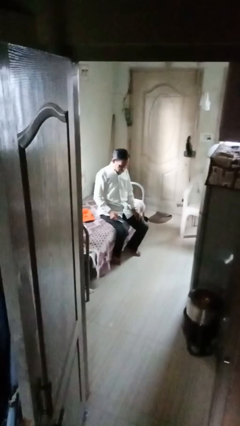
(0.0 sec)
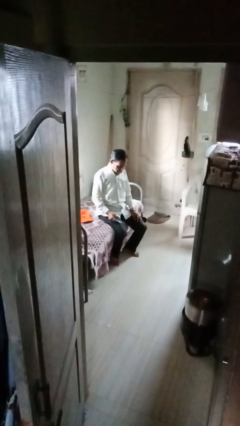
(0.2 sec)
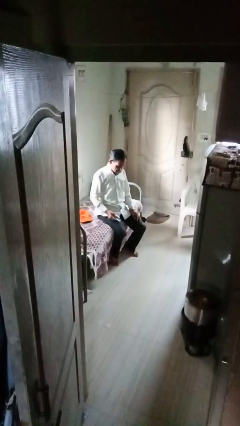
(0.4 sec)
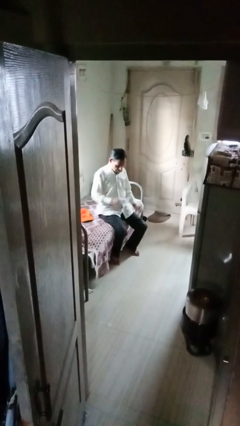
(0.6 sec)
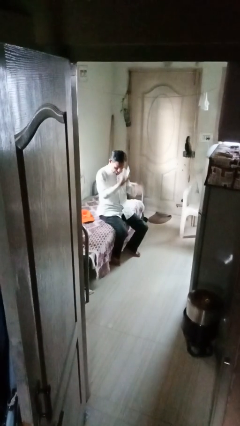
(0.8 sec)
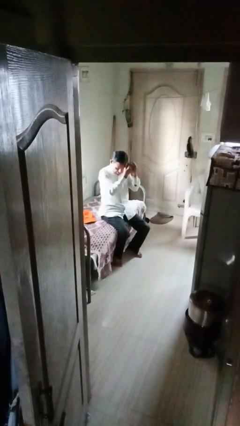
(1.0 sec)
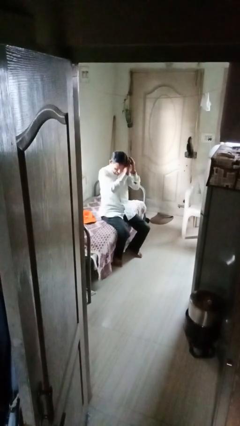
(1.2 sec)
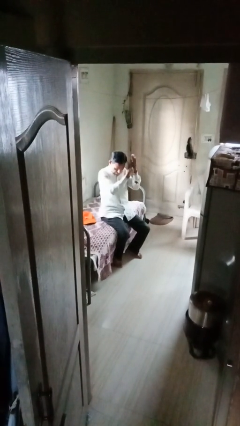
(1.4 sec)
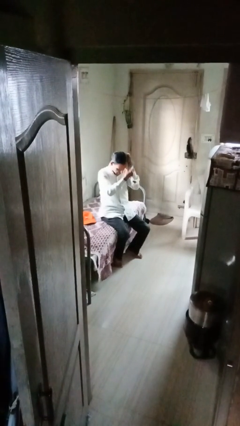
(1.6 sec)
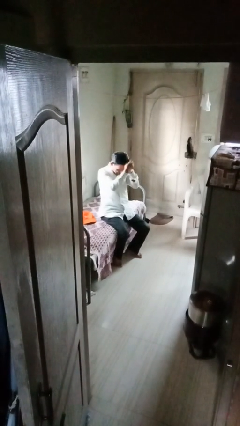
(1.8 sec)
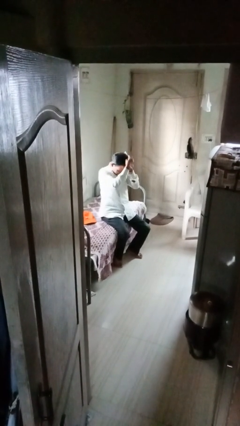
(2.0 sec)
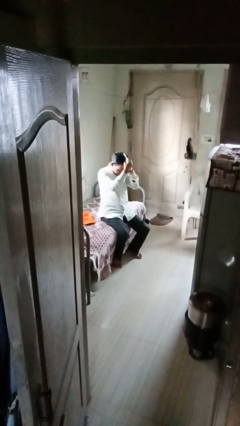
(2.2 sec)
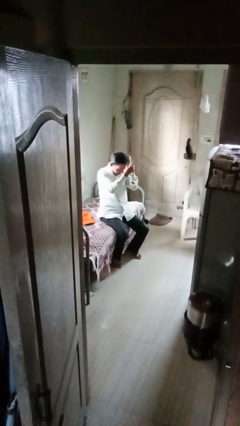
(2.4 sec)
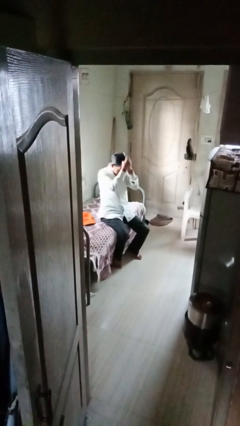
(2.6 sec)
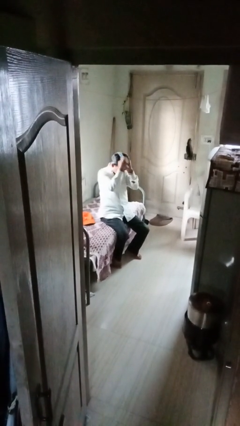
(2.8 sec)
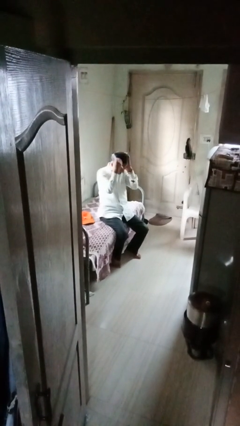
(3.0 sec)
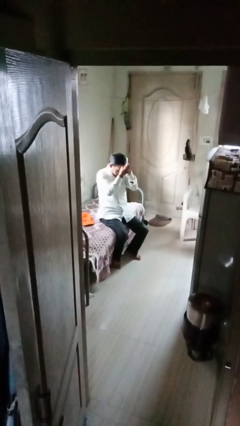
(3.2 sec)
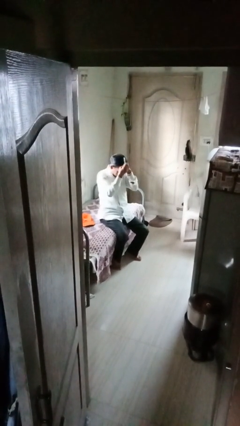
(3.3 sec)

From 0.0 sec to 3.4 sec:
person brushes hair

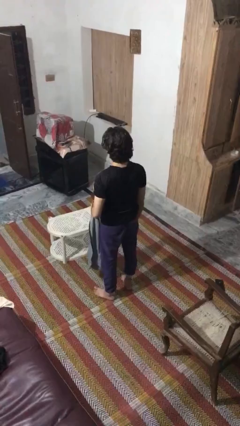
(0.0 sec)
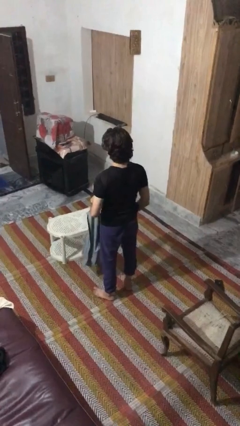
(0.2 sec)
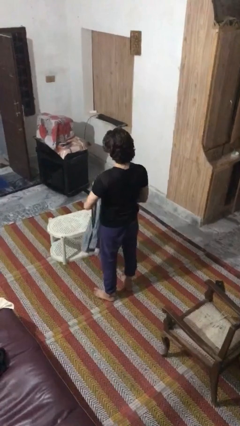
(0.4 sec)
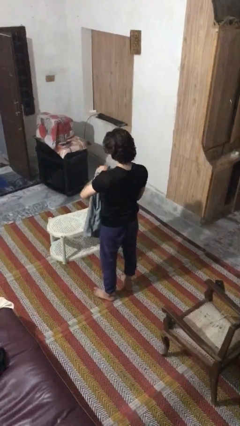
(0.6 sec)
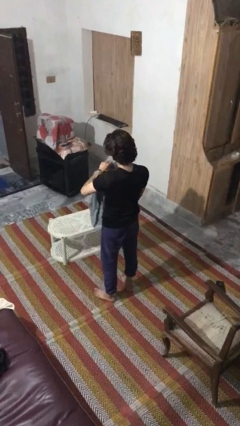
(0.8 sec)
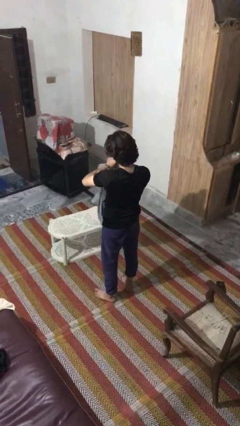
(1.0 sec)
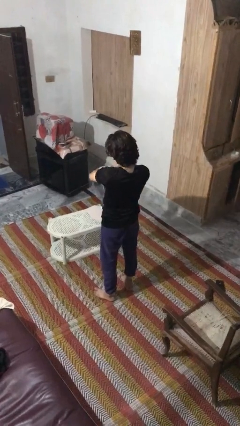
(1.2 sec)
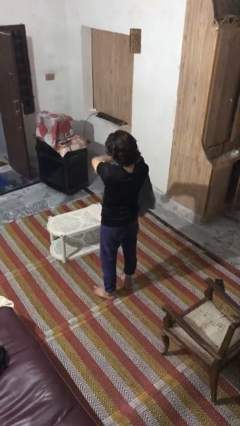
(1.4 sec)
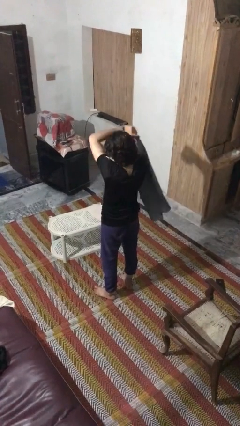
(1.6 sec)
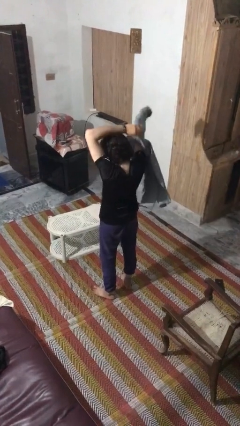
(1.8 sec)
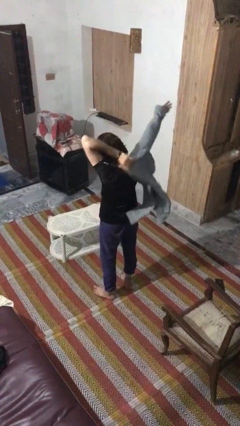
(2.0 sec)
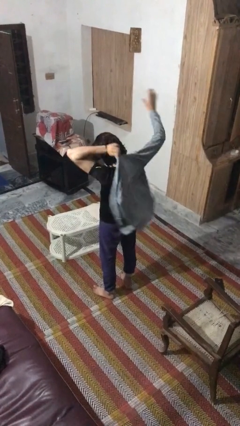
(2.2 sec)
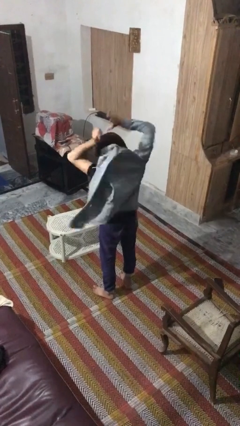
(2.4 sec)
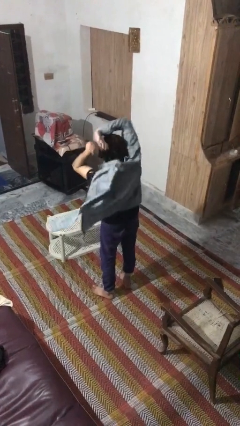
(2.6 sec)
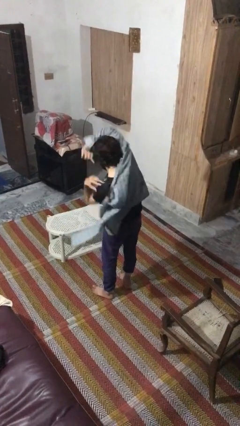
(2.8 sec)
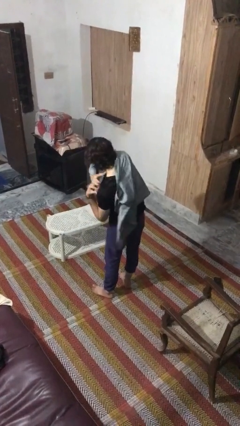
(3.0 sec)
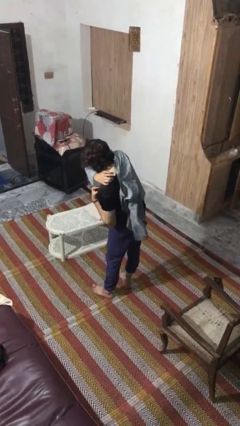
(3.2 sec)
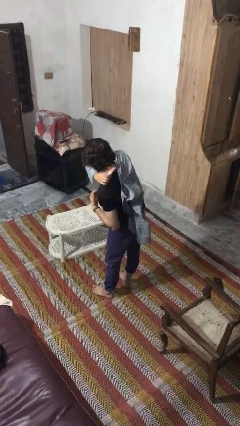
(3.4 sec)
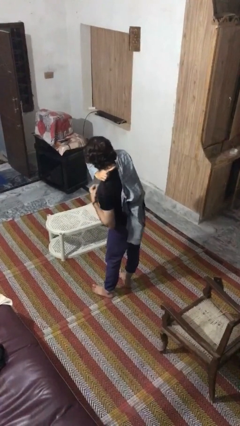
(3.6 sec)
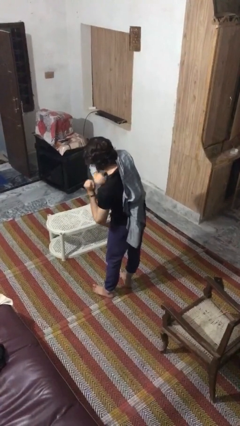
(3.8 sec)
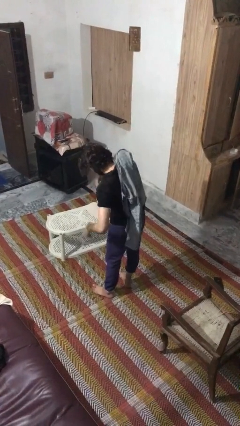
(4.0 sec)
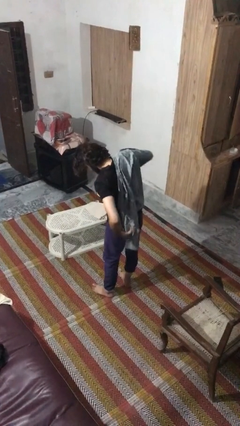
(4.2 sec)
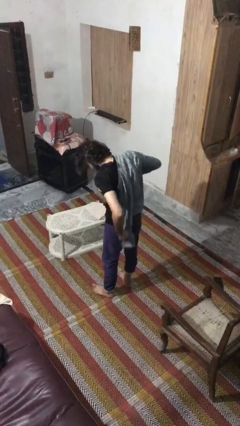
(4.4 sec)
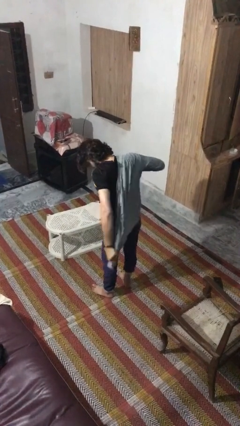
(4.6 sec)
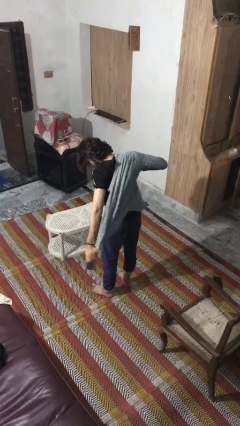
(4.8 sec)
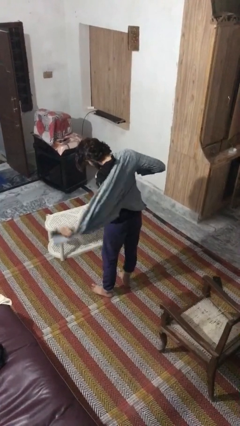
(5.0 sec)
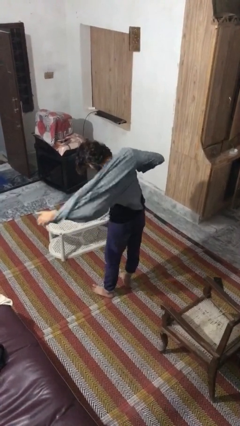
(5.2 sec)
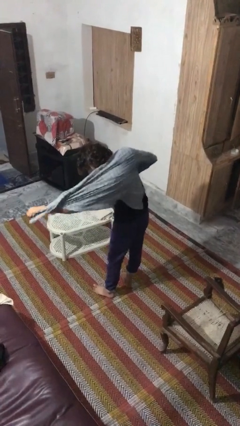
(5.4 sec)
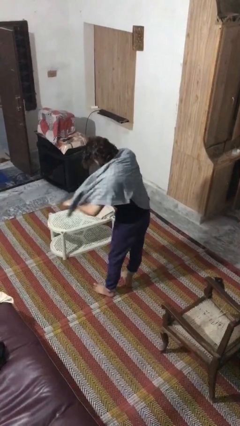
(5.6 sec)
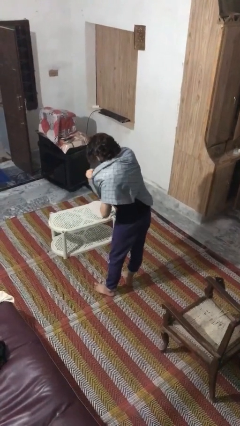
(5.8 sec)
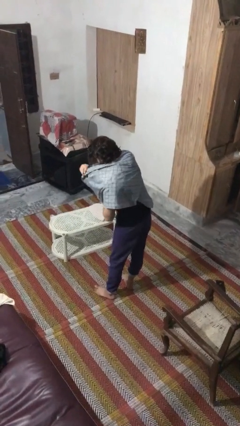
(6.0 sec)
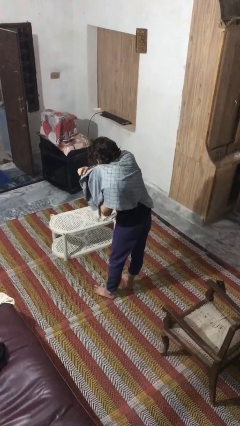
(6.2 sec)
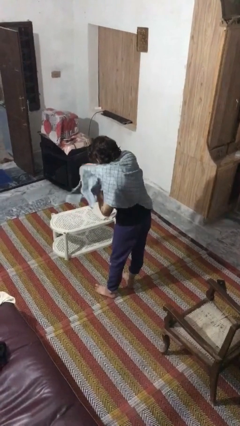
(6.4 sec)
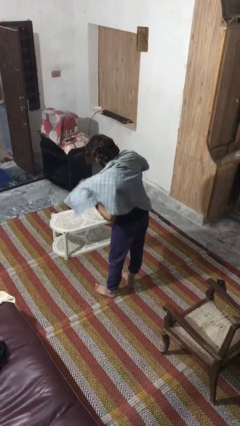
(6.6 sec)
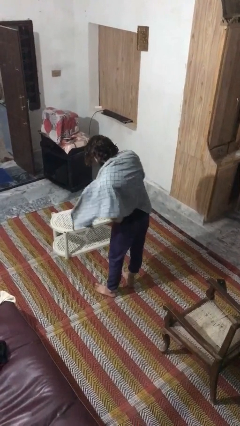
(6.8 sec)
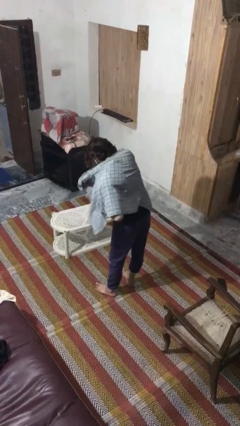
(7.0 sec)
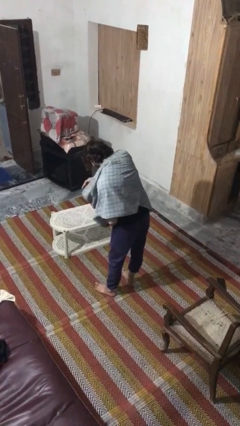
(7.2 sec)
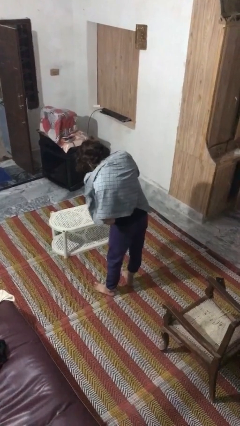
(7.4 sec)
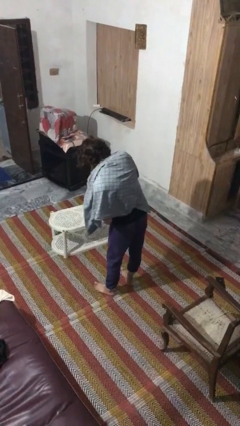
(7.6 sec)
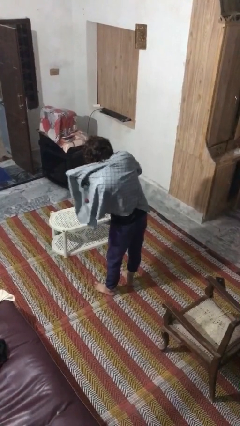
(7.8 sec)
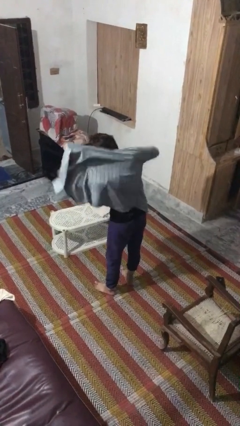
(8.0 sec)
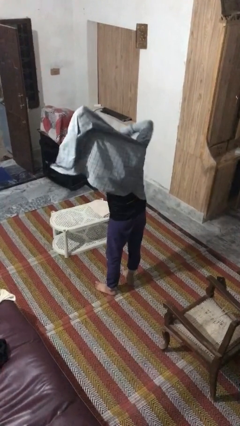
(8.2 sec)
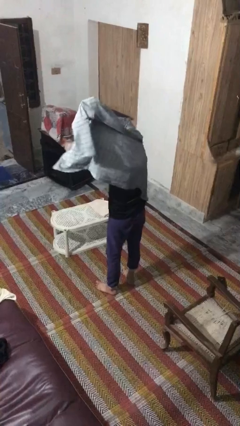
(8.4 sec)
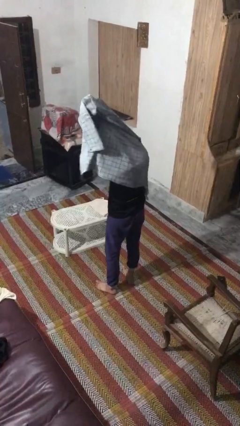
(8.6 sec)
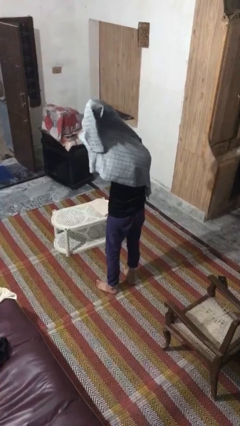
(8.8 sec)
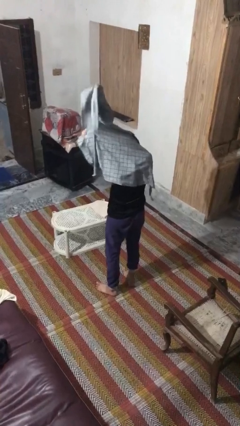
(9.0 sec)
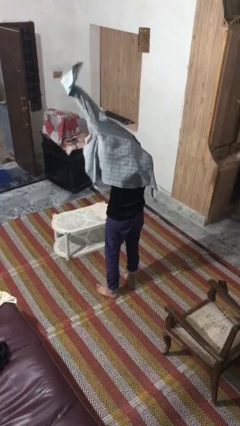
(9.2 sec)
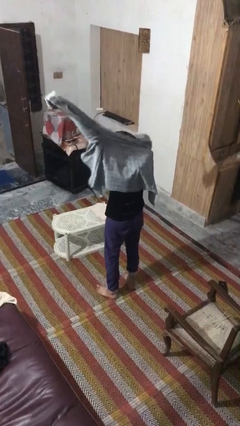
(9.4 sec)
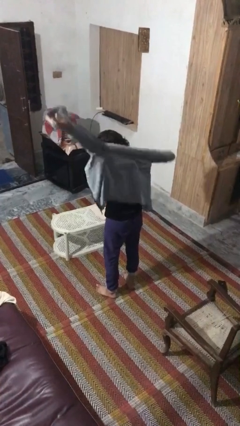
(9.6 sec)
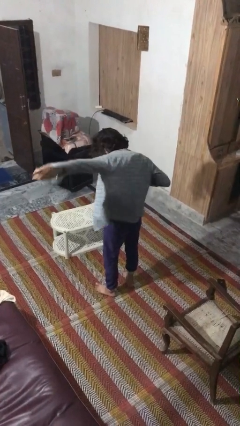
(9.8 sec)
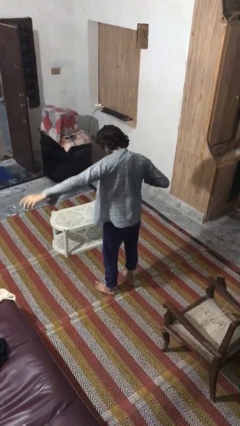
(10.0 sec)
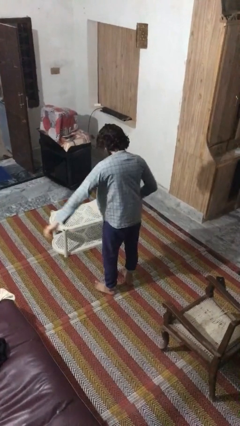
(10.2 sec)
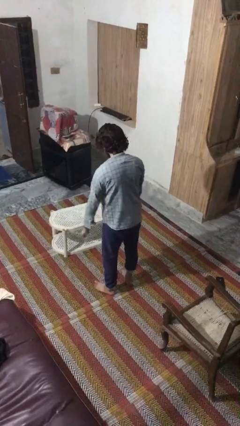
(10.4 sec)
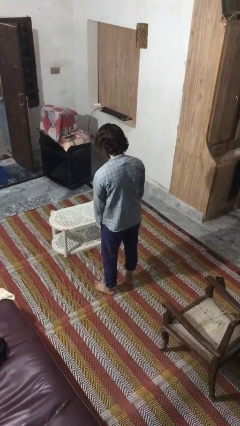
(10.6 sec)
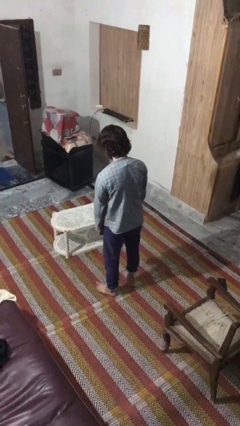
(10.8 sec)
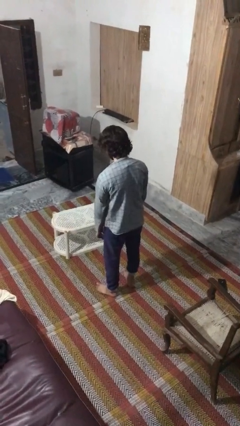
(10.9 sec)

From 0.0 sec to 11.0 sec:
person puts on shirt

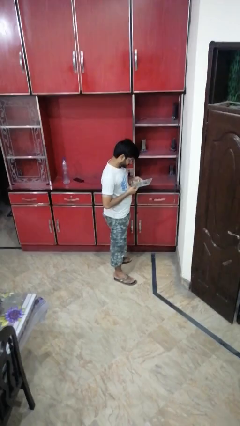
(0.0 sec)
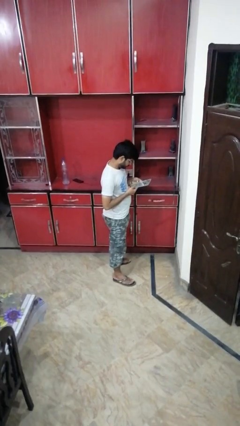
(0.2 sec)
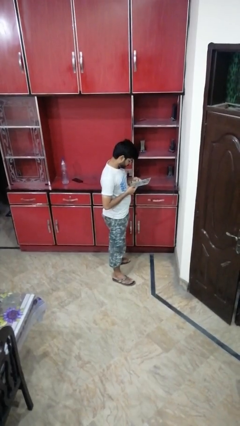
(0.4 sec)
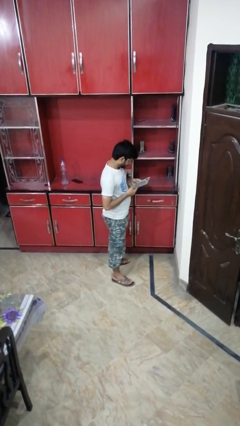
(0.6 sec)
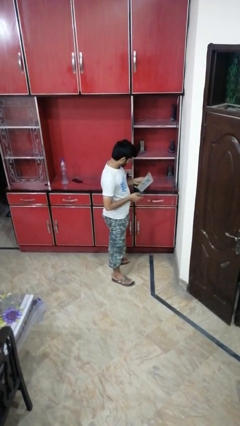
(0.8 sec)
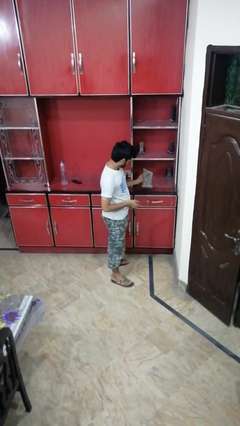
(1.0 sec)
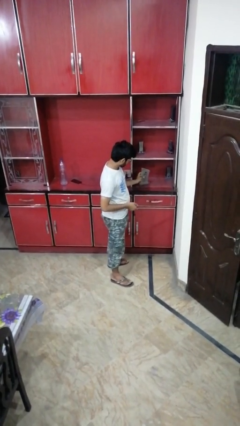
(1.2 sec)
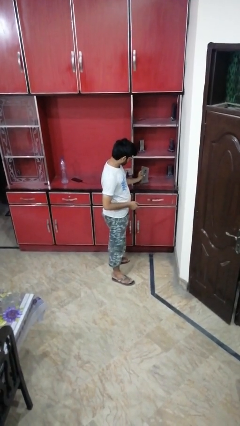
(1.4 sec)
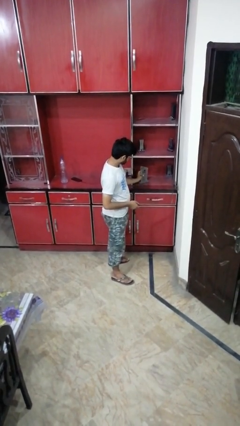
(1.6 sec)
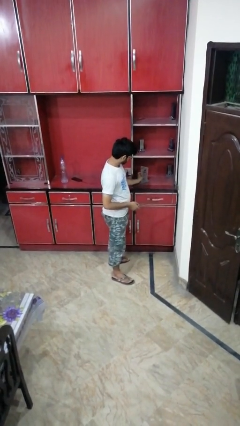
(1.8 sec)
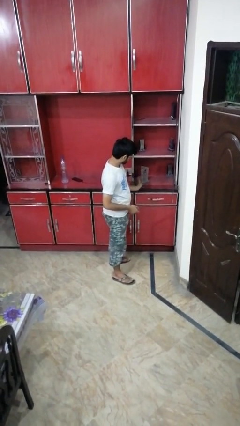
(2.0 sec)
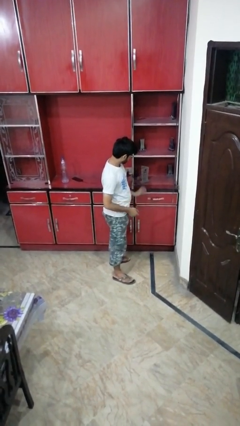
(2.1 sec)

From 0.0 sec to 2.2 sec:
person puts down object into cabinet

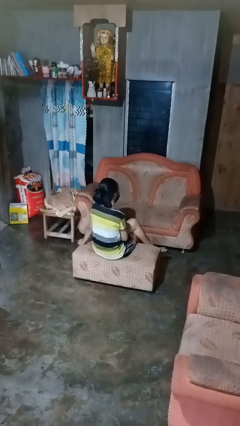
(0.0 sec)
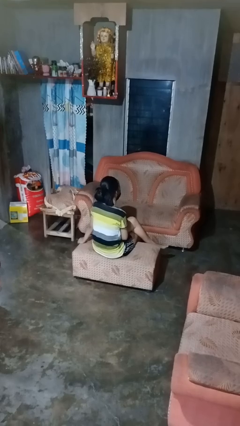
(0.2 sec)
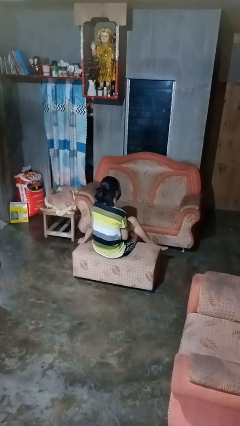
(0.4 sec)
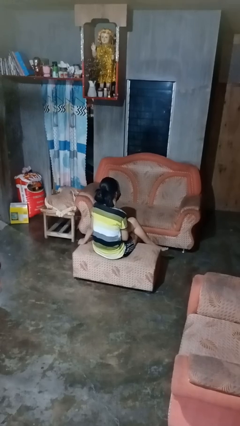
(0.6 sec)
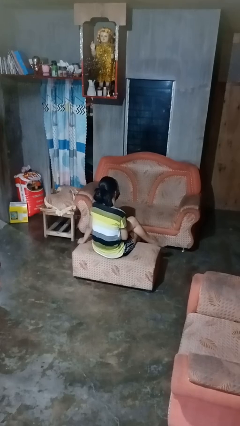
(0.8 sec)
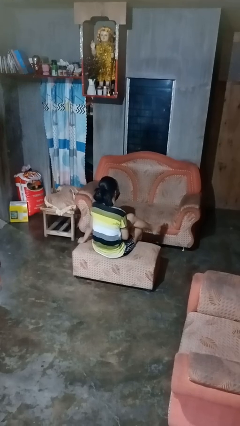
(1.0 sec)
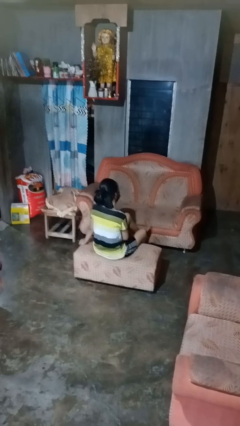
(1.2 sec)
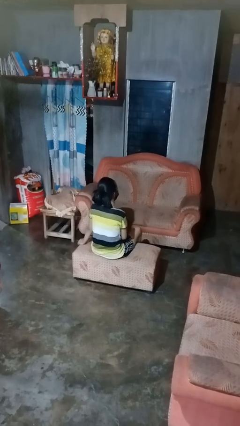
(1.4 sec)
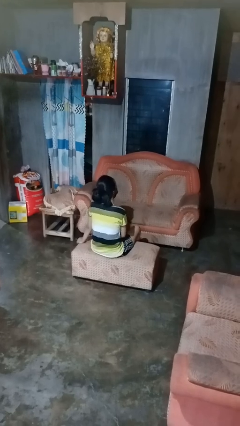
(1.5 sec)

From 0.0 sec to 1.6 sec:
person crosses legs
